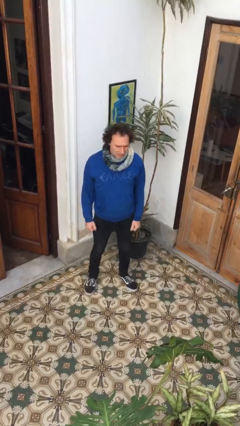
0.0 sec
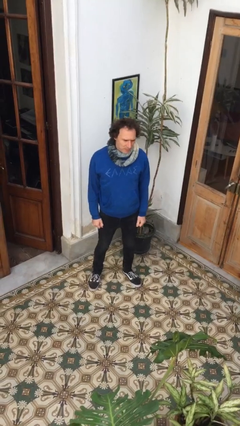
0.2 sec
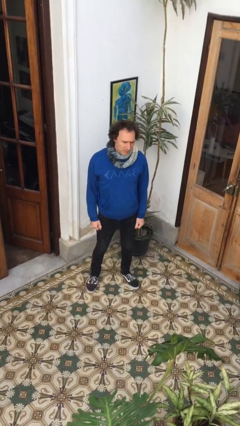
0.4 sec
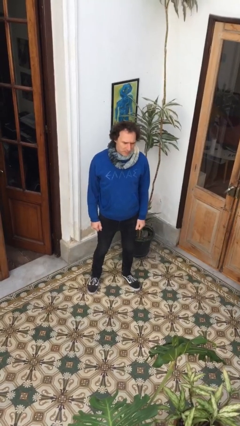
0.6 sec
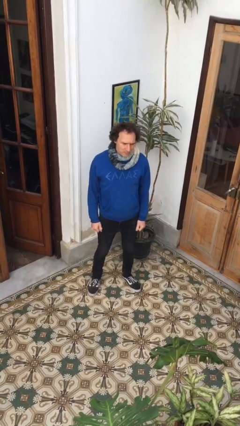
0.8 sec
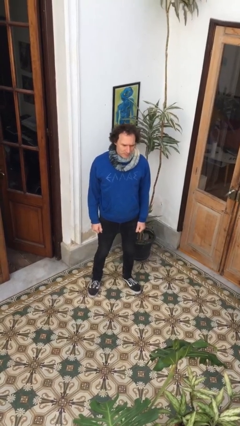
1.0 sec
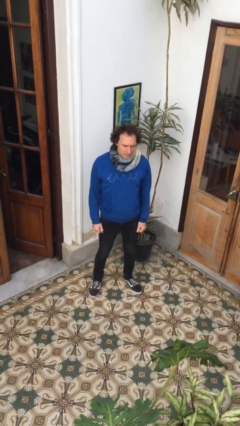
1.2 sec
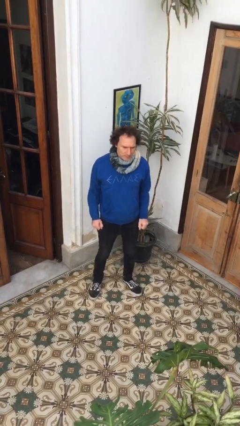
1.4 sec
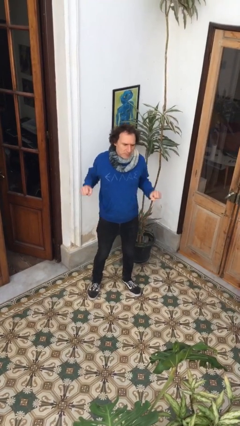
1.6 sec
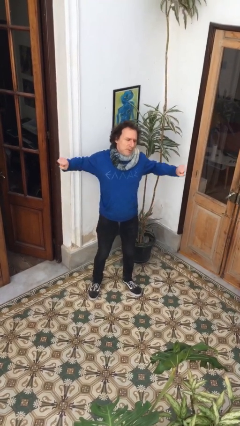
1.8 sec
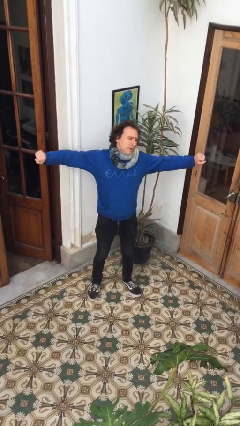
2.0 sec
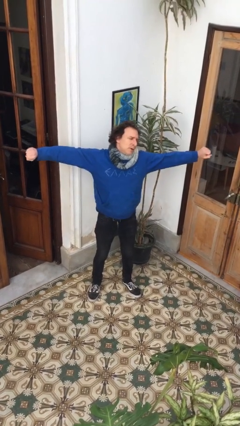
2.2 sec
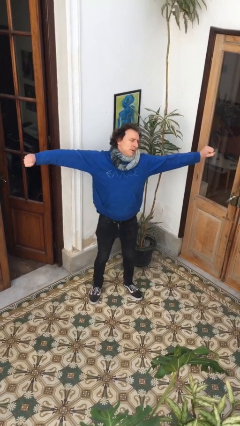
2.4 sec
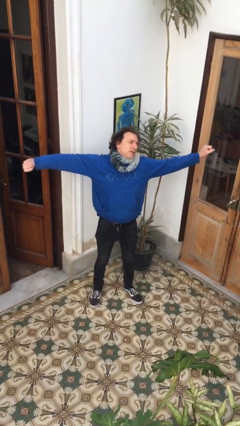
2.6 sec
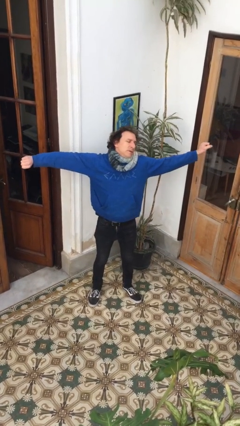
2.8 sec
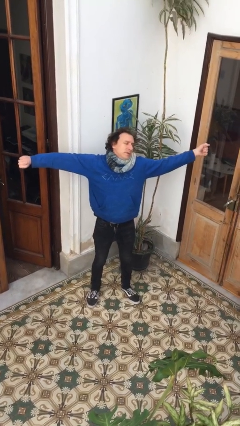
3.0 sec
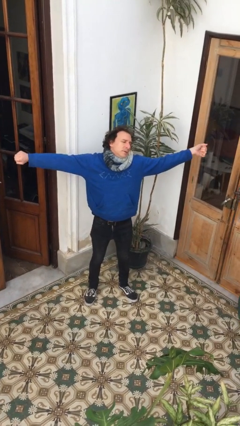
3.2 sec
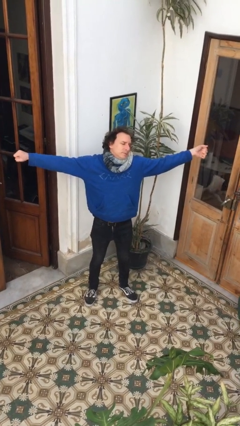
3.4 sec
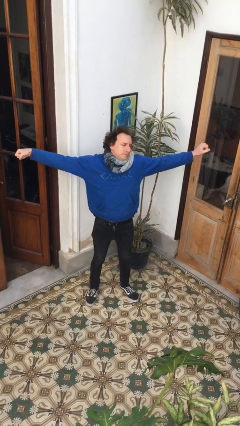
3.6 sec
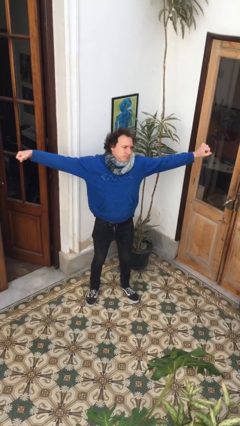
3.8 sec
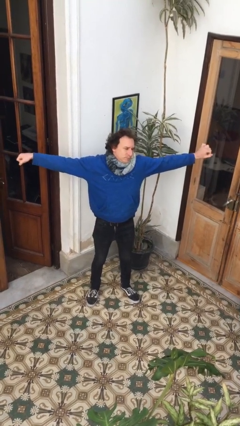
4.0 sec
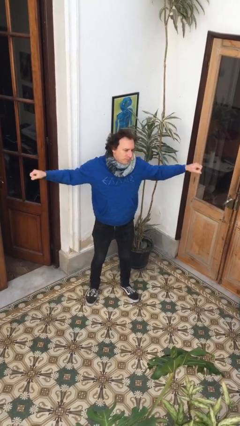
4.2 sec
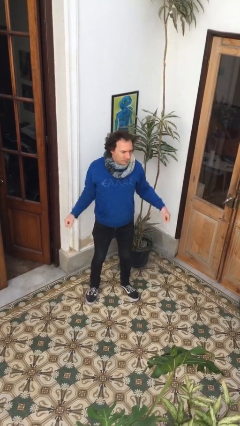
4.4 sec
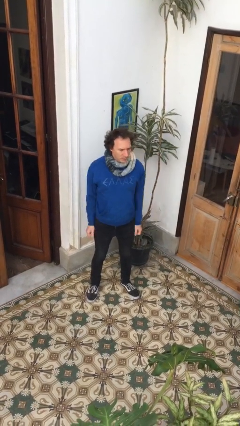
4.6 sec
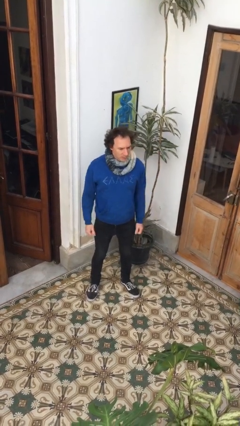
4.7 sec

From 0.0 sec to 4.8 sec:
person stretches arms to side

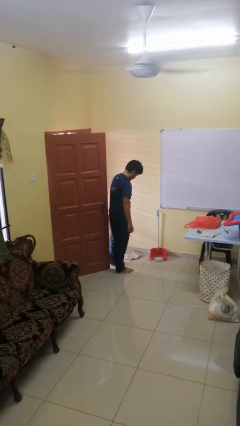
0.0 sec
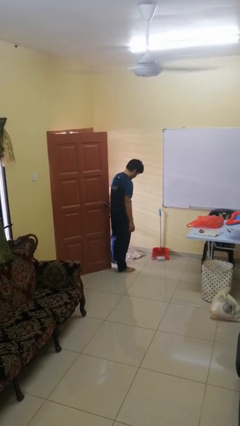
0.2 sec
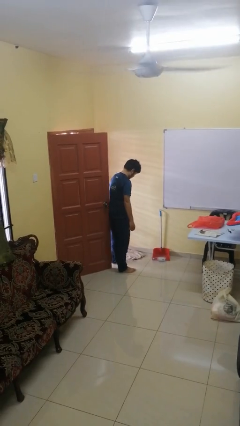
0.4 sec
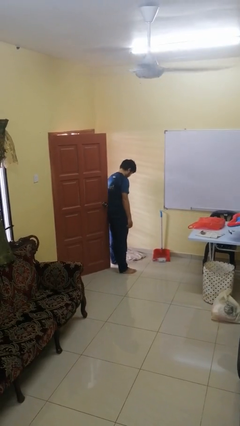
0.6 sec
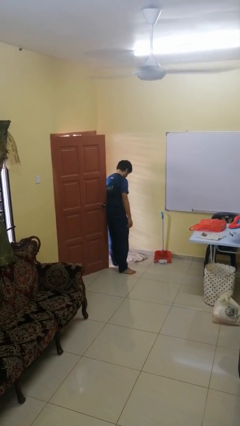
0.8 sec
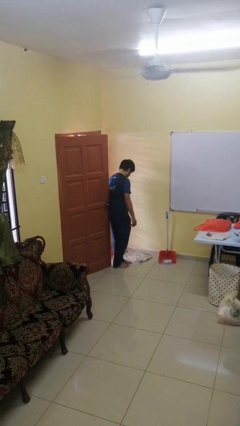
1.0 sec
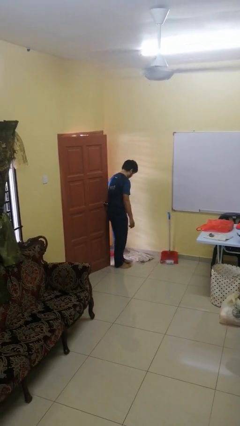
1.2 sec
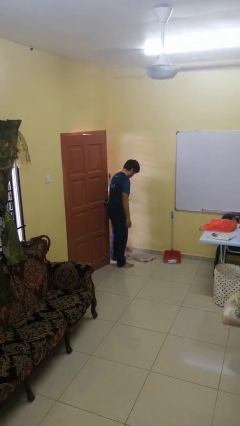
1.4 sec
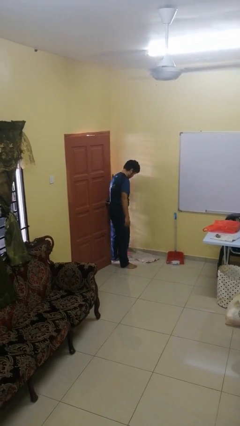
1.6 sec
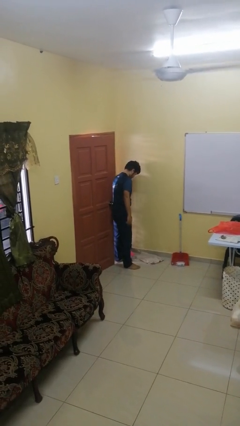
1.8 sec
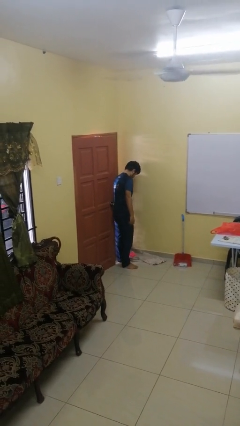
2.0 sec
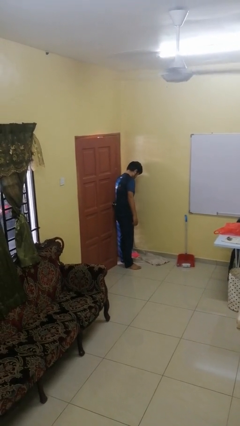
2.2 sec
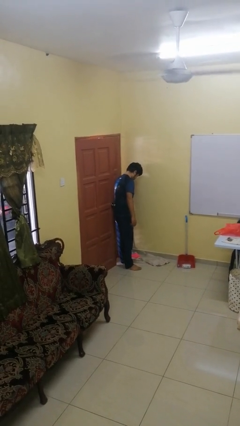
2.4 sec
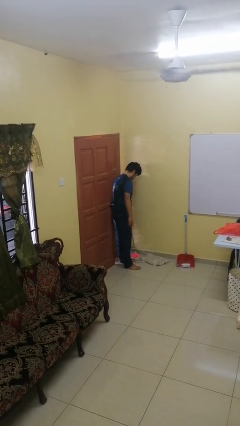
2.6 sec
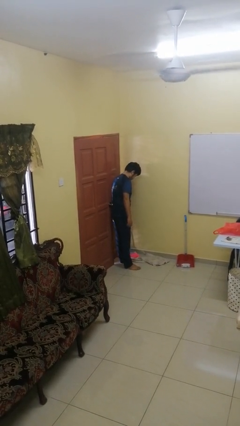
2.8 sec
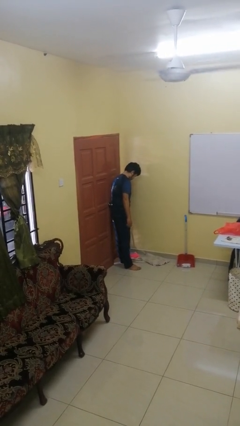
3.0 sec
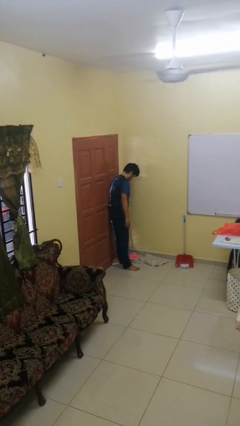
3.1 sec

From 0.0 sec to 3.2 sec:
person closes door with hip

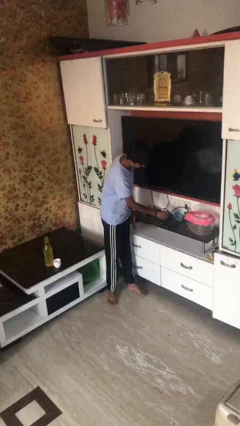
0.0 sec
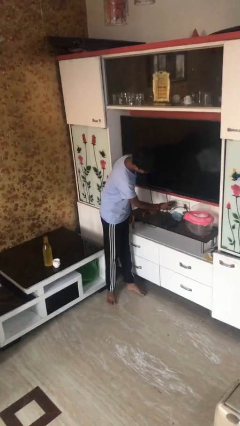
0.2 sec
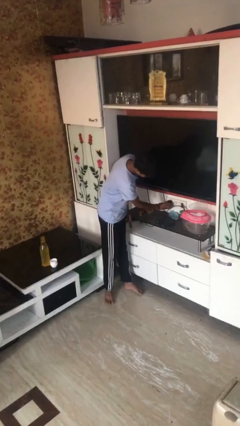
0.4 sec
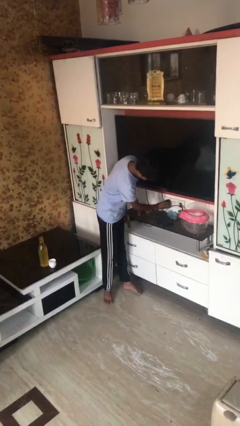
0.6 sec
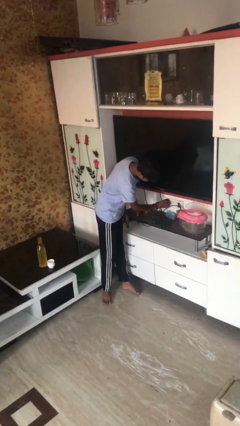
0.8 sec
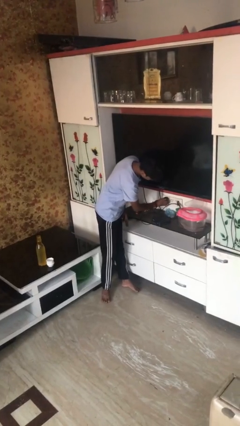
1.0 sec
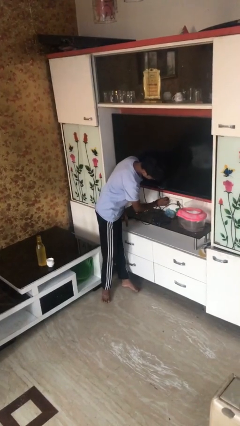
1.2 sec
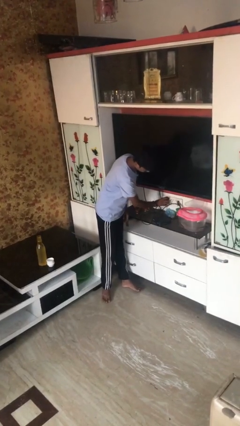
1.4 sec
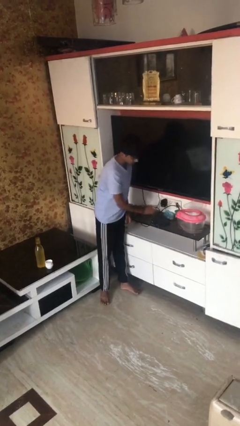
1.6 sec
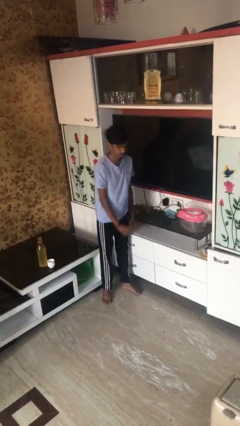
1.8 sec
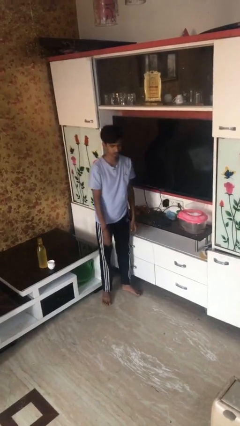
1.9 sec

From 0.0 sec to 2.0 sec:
person plugs into electrical socket

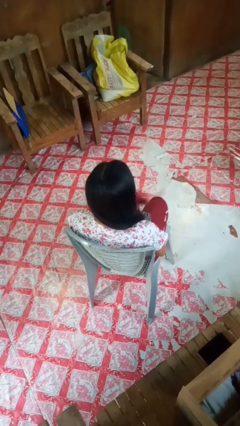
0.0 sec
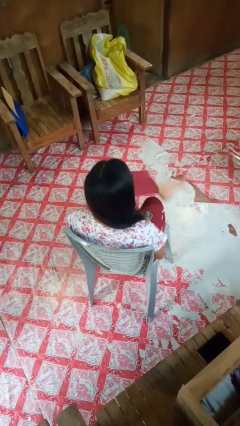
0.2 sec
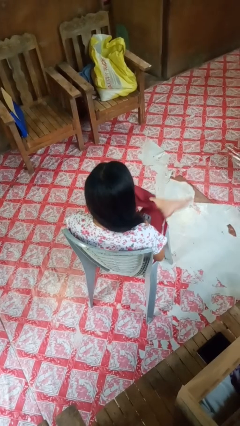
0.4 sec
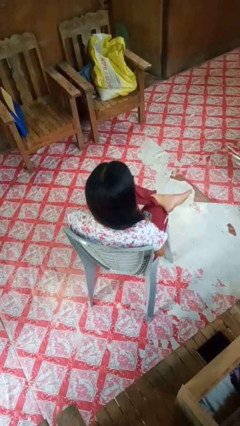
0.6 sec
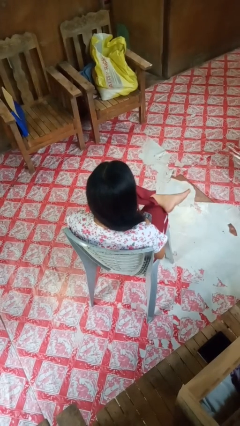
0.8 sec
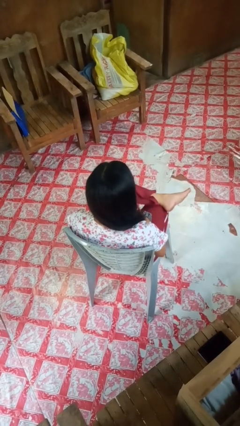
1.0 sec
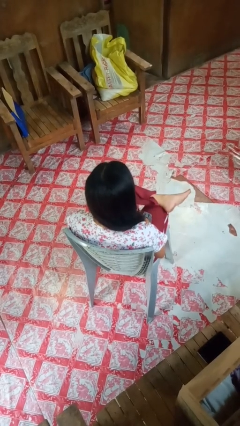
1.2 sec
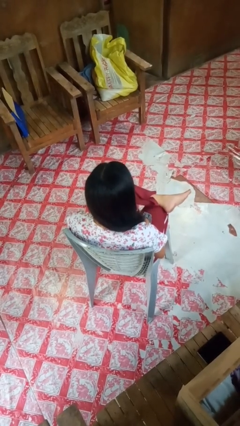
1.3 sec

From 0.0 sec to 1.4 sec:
person crosses legs

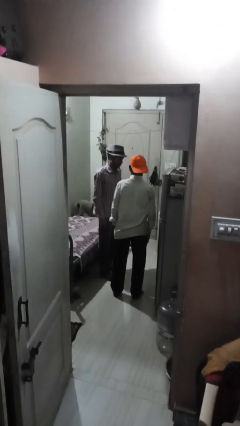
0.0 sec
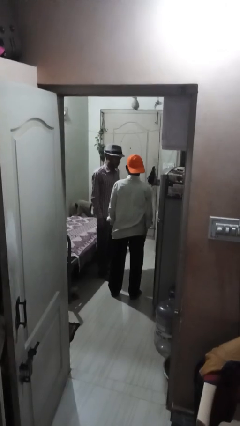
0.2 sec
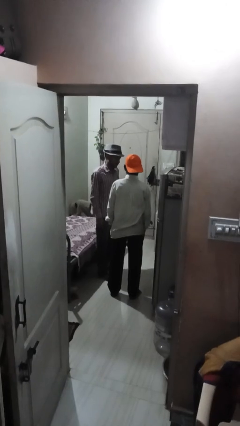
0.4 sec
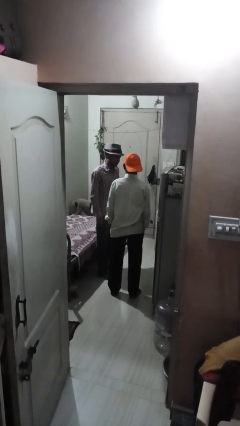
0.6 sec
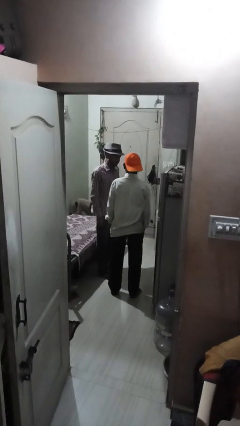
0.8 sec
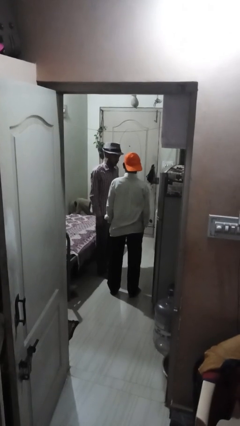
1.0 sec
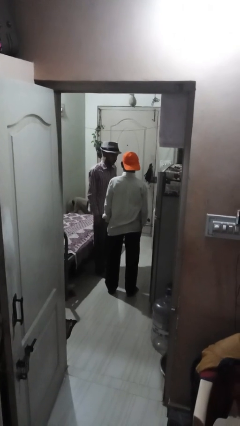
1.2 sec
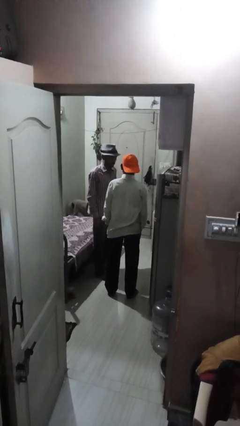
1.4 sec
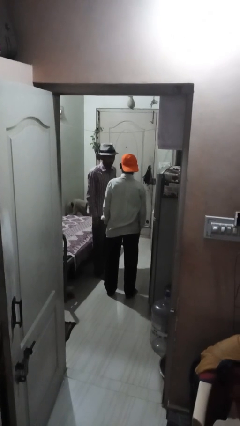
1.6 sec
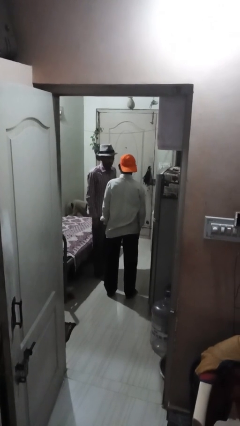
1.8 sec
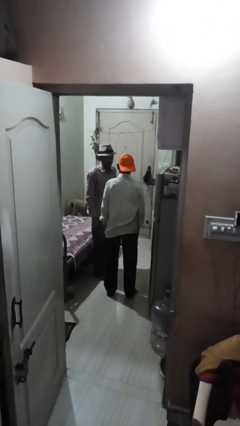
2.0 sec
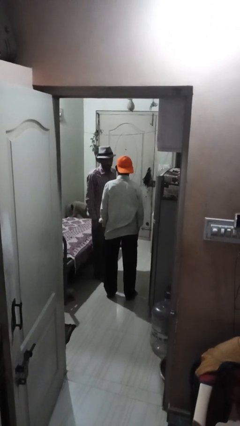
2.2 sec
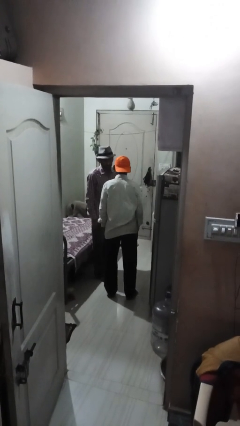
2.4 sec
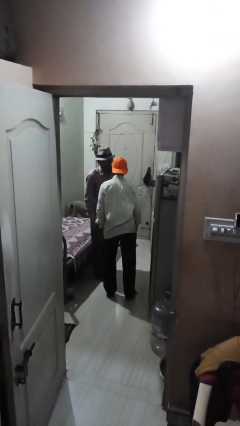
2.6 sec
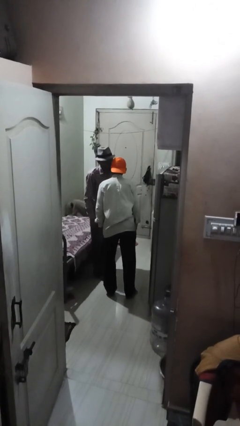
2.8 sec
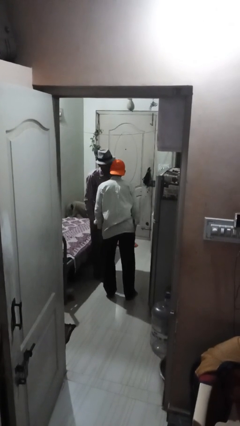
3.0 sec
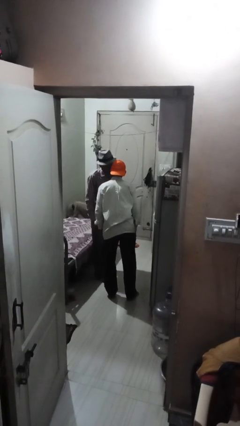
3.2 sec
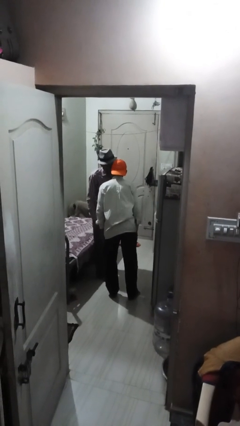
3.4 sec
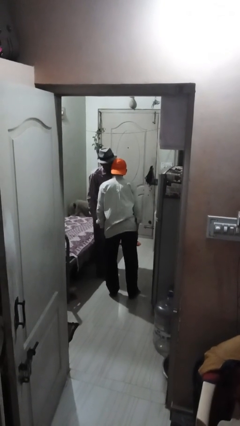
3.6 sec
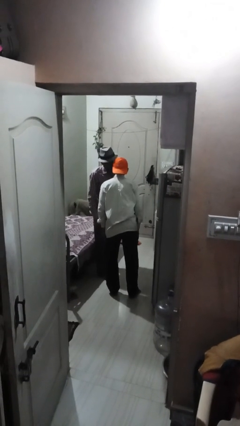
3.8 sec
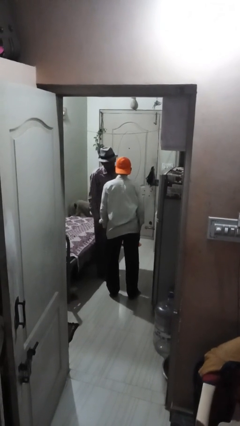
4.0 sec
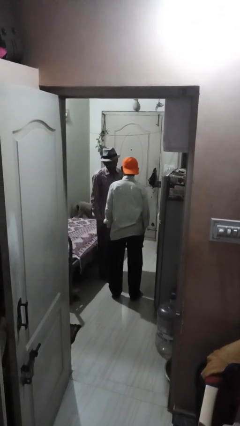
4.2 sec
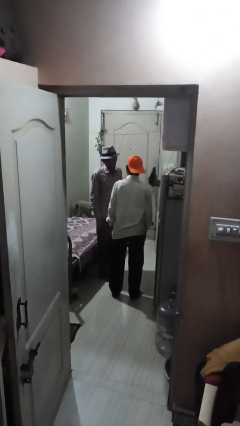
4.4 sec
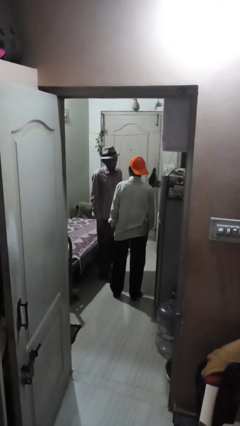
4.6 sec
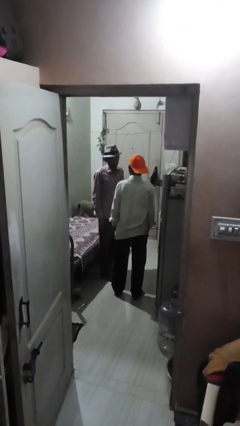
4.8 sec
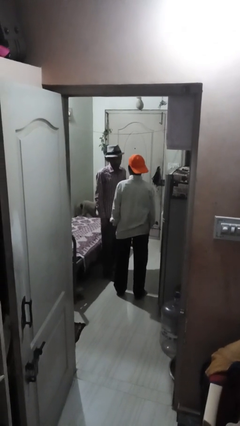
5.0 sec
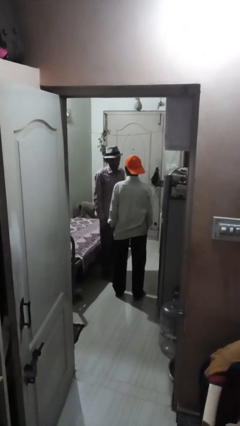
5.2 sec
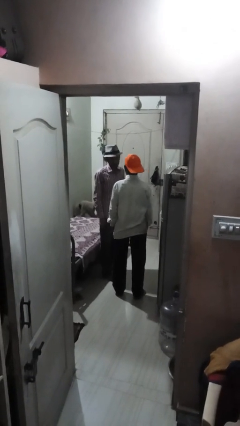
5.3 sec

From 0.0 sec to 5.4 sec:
person kisses cheek of person

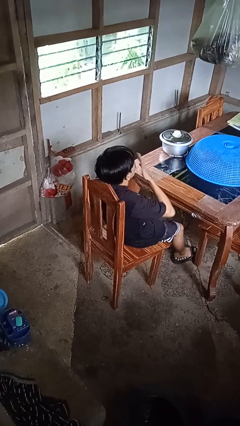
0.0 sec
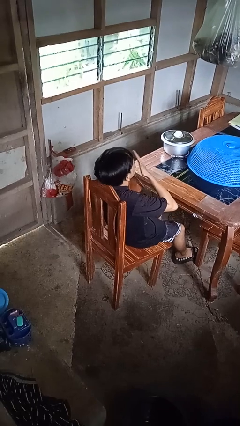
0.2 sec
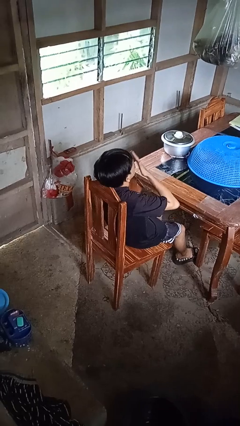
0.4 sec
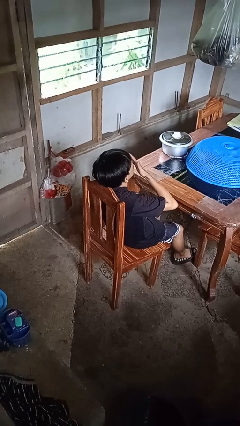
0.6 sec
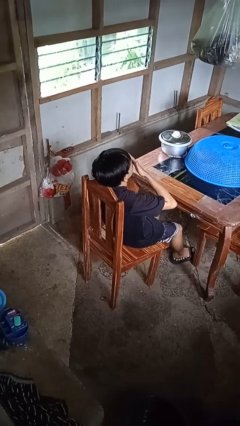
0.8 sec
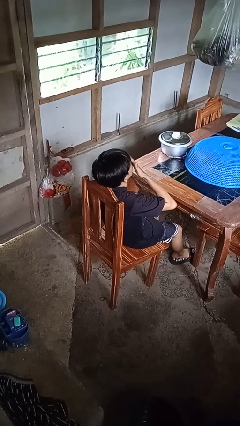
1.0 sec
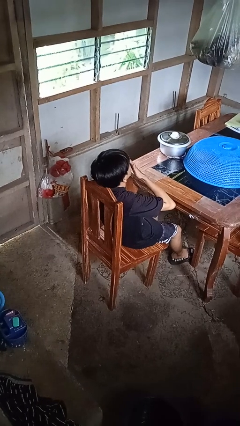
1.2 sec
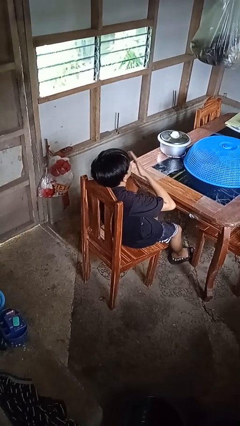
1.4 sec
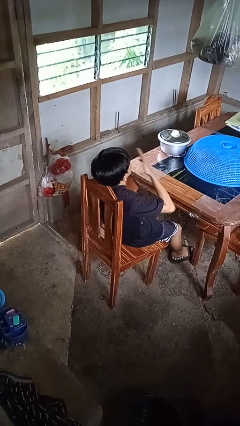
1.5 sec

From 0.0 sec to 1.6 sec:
person yawns
